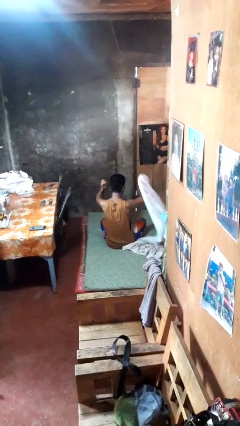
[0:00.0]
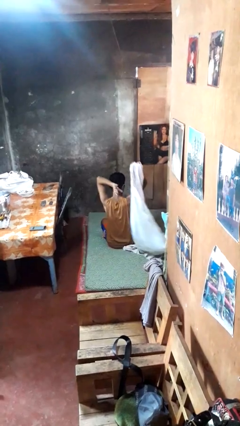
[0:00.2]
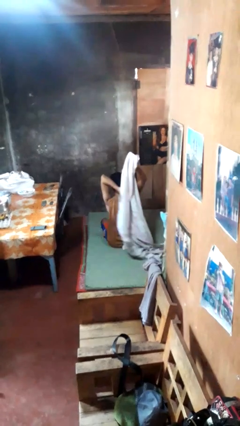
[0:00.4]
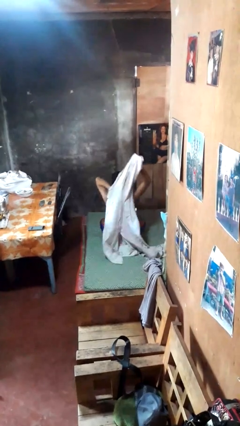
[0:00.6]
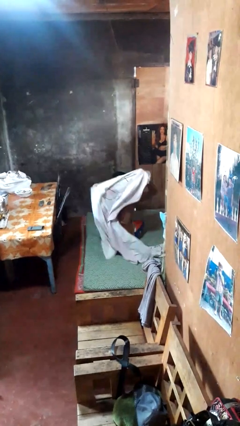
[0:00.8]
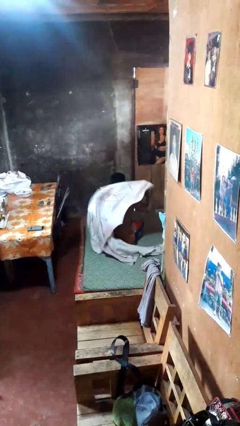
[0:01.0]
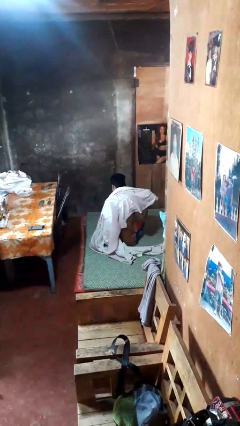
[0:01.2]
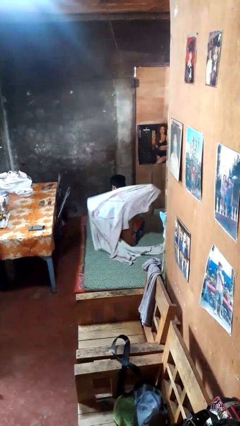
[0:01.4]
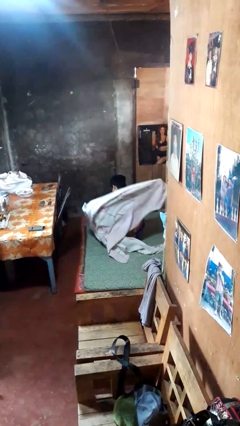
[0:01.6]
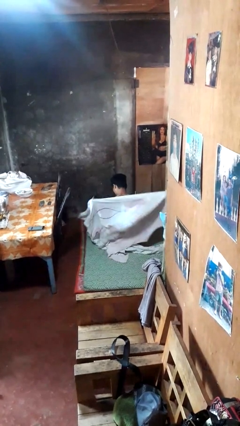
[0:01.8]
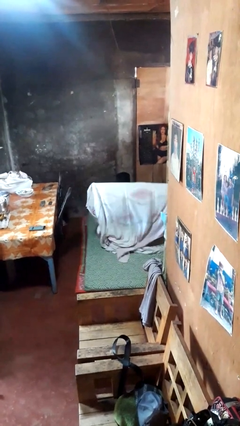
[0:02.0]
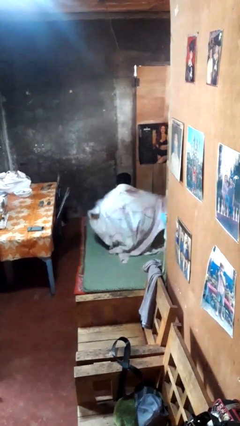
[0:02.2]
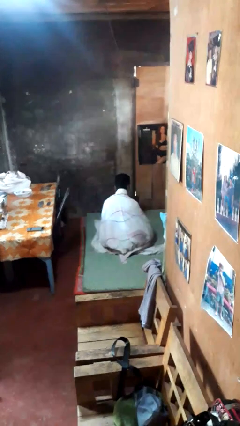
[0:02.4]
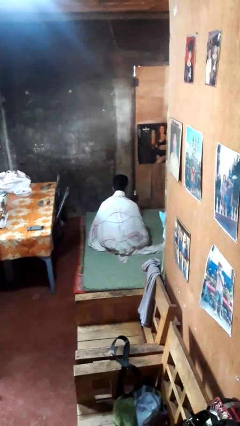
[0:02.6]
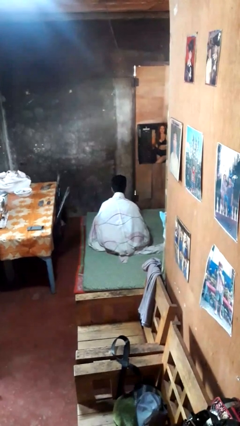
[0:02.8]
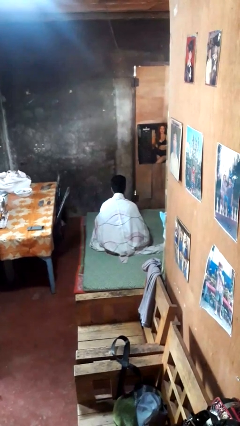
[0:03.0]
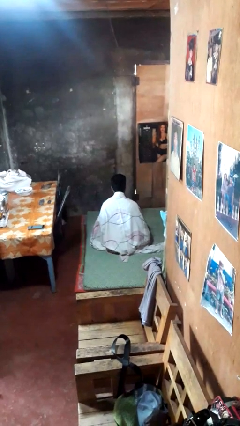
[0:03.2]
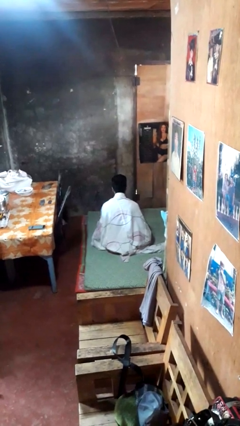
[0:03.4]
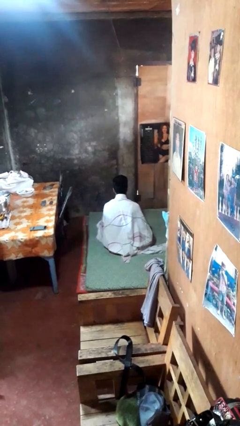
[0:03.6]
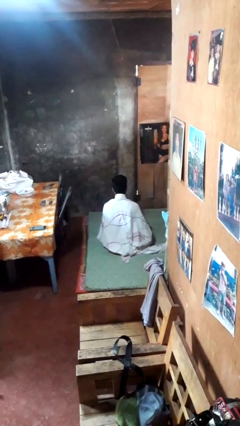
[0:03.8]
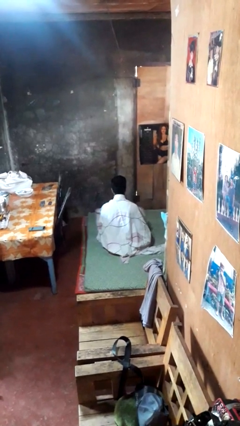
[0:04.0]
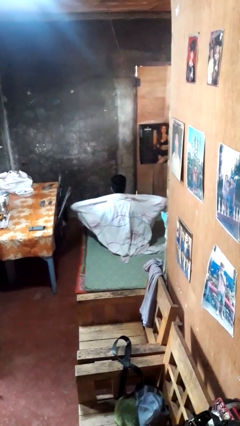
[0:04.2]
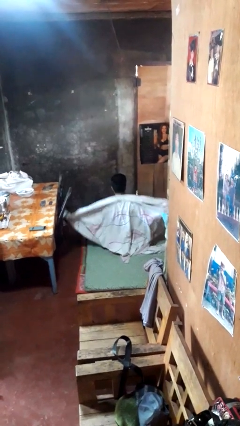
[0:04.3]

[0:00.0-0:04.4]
person covers with blanket

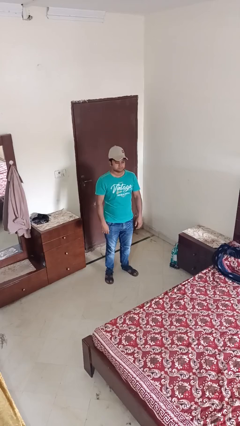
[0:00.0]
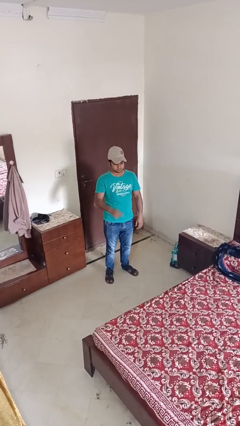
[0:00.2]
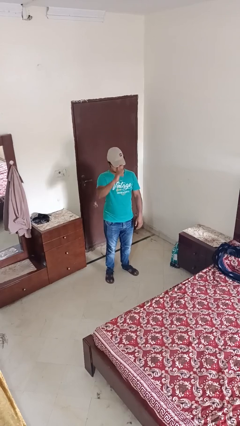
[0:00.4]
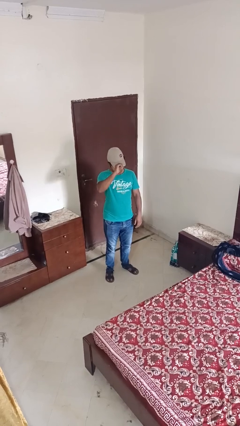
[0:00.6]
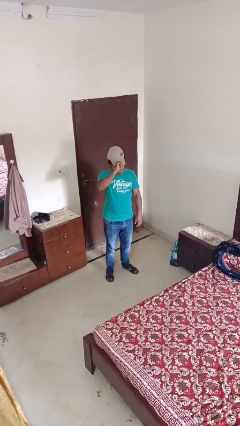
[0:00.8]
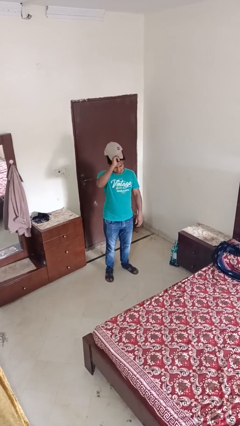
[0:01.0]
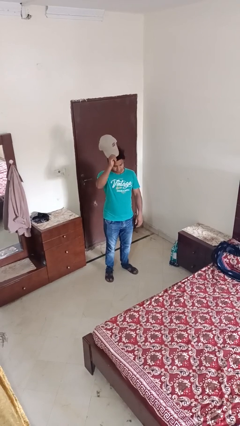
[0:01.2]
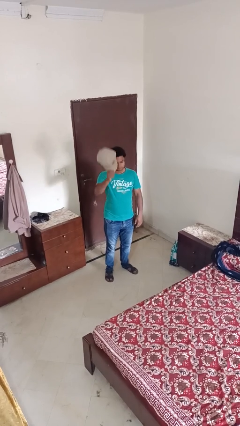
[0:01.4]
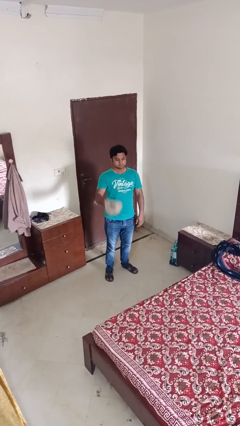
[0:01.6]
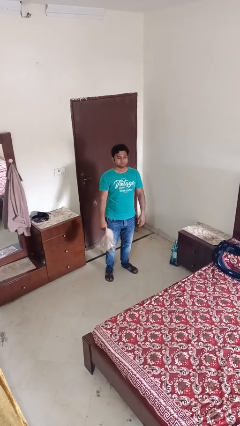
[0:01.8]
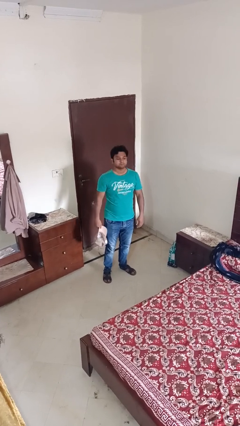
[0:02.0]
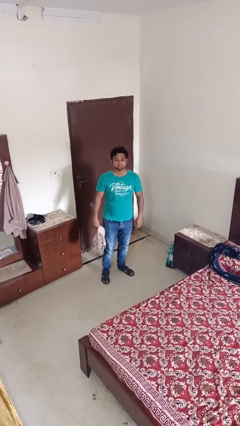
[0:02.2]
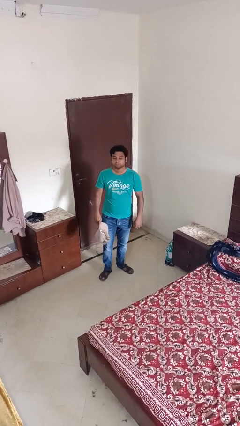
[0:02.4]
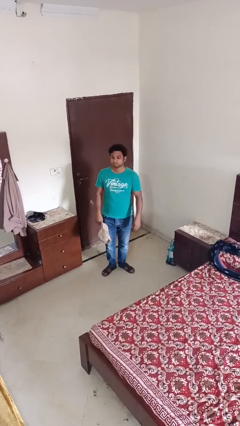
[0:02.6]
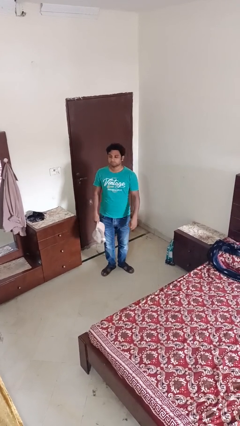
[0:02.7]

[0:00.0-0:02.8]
person takes off hat

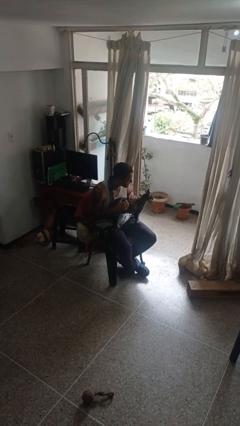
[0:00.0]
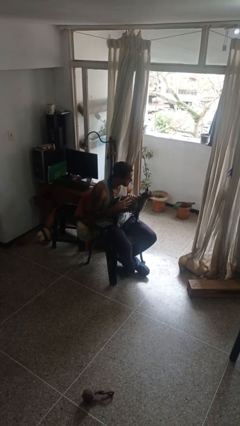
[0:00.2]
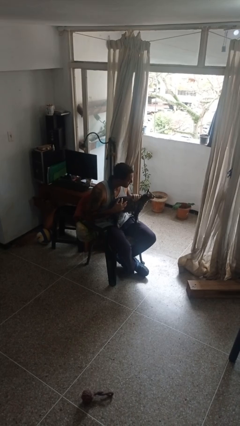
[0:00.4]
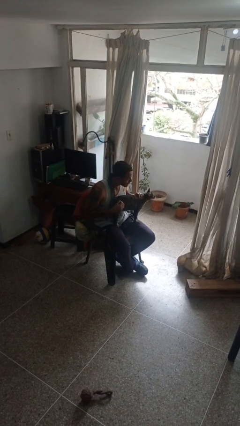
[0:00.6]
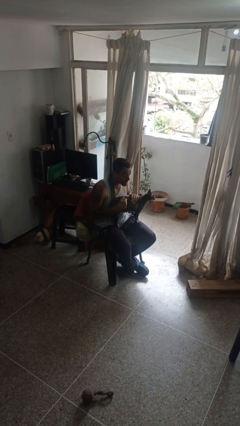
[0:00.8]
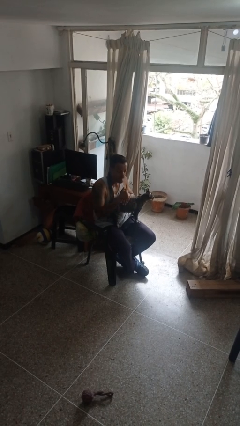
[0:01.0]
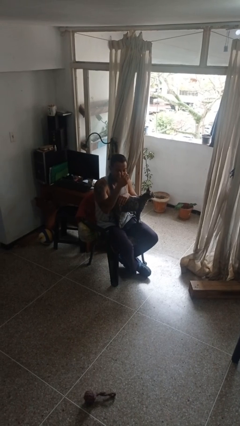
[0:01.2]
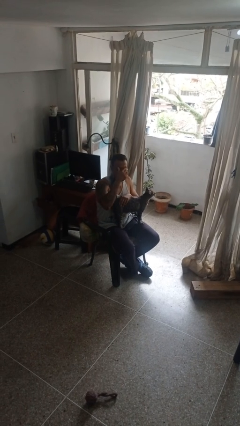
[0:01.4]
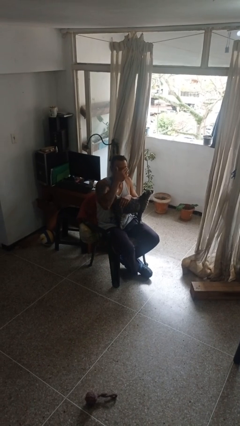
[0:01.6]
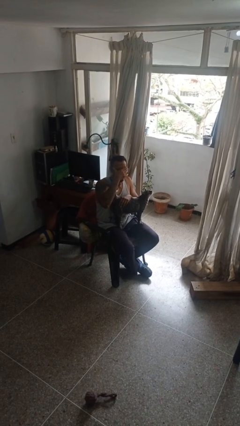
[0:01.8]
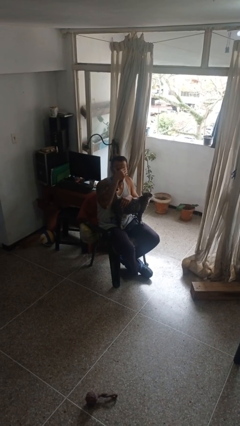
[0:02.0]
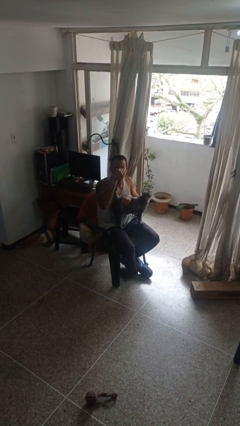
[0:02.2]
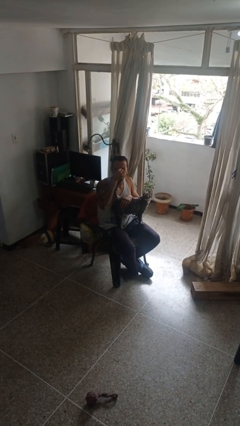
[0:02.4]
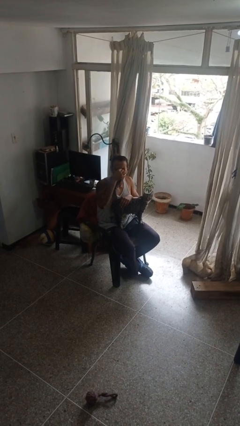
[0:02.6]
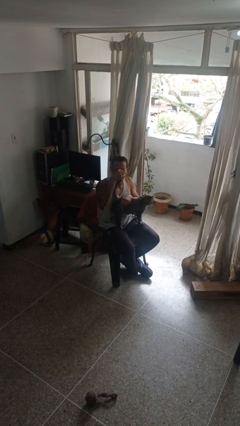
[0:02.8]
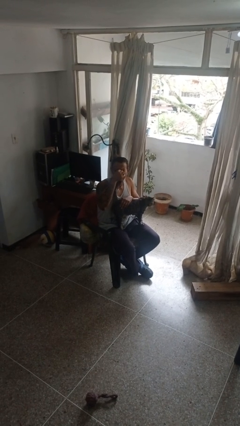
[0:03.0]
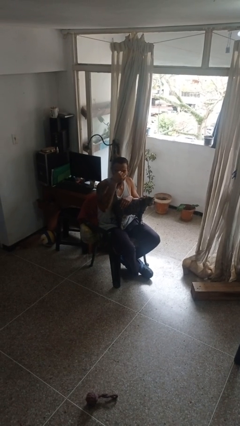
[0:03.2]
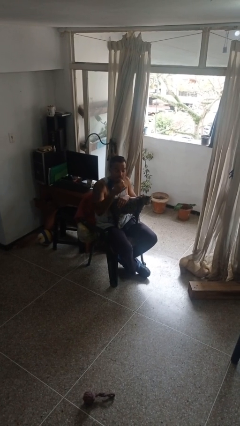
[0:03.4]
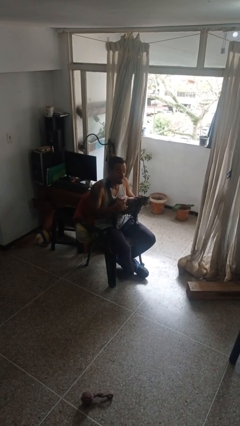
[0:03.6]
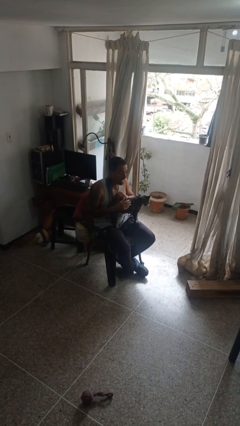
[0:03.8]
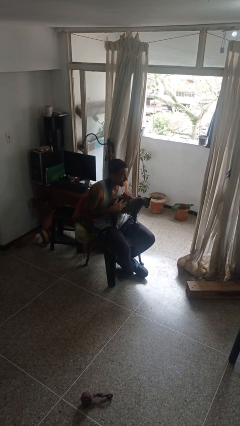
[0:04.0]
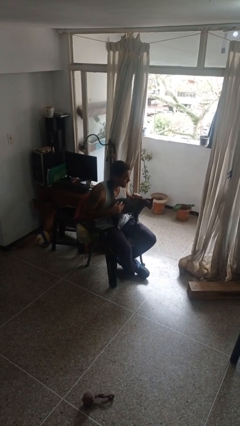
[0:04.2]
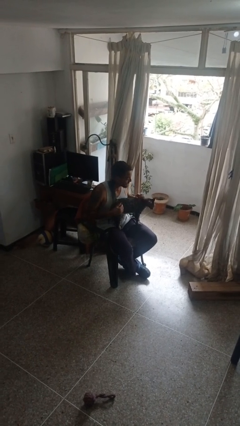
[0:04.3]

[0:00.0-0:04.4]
person rubs eyes

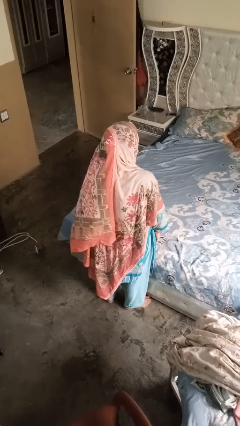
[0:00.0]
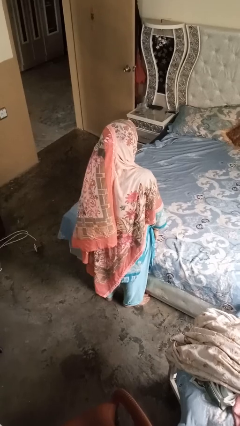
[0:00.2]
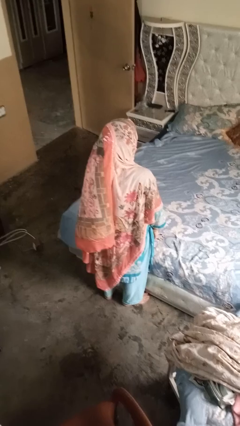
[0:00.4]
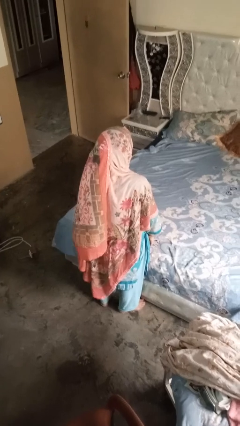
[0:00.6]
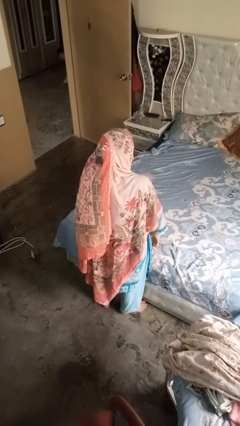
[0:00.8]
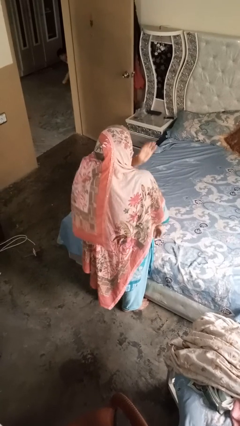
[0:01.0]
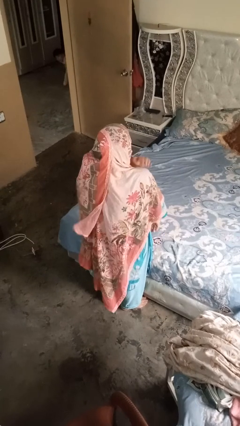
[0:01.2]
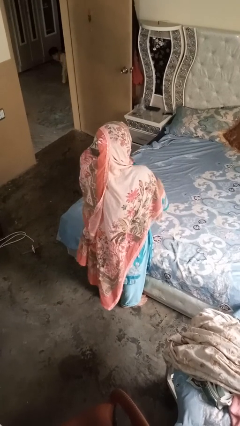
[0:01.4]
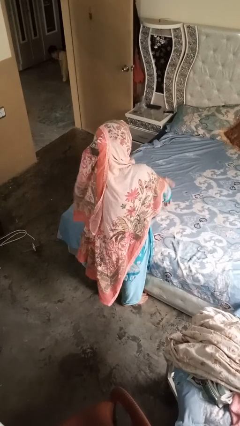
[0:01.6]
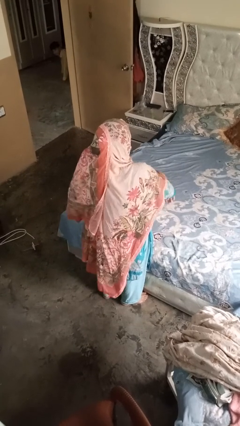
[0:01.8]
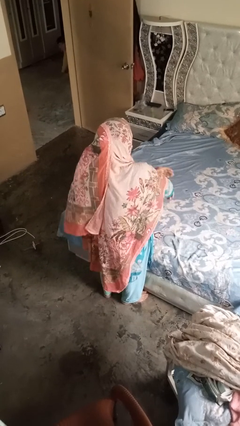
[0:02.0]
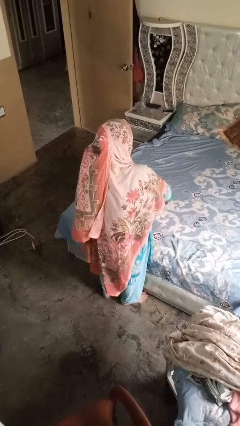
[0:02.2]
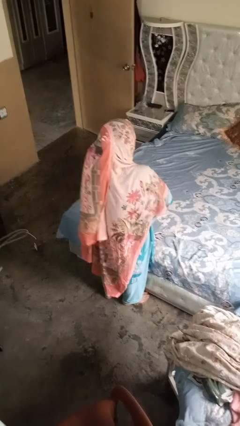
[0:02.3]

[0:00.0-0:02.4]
person swats bug

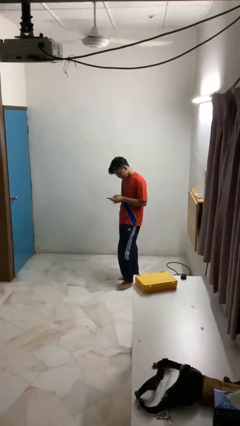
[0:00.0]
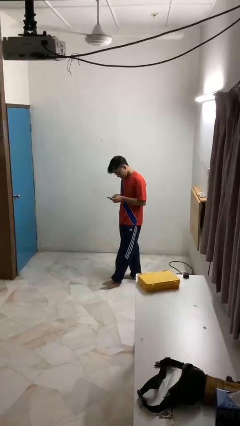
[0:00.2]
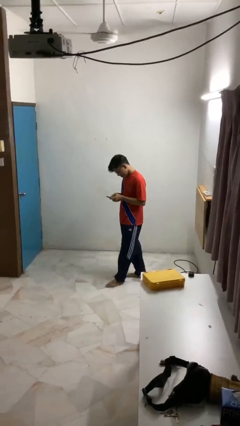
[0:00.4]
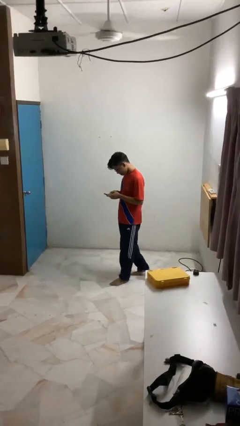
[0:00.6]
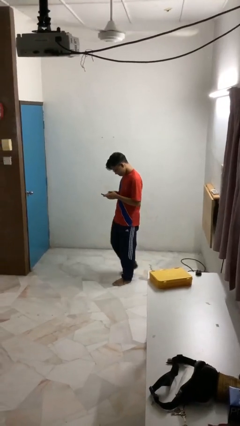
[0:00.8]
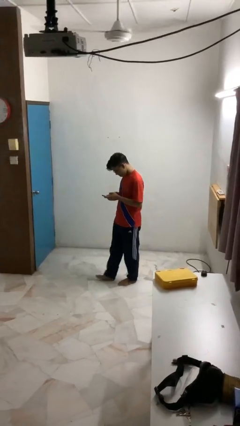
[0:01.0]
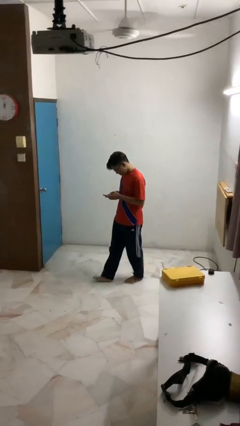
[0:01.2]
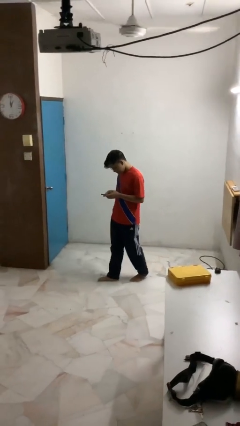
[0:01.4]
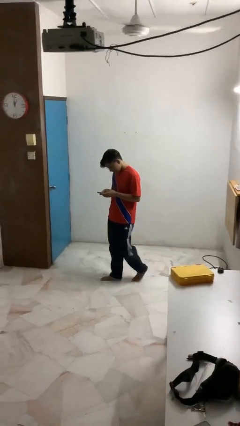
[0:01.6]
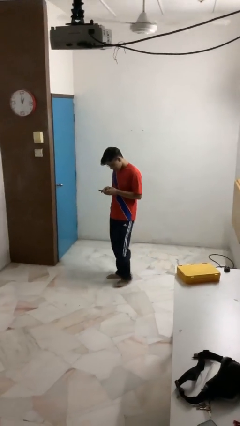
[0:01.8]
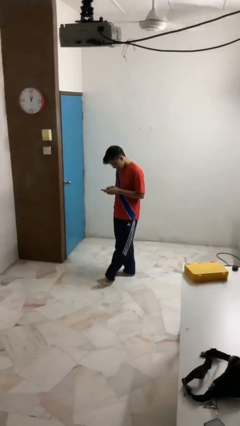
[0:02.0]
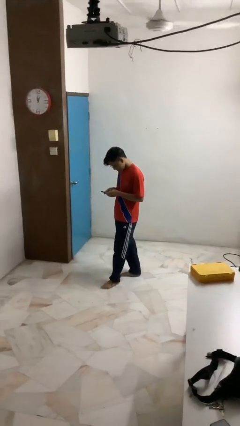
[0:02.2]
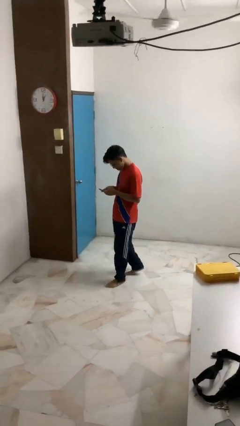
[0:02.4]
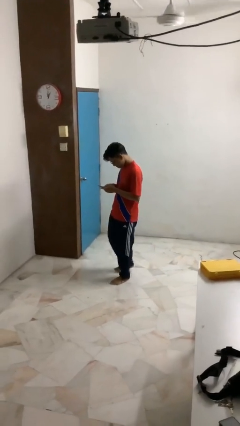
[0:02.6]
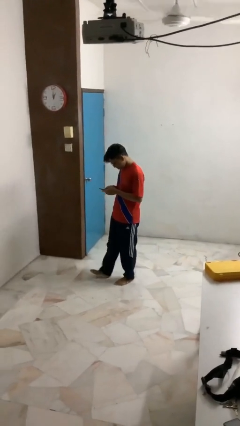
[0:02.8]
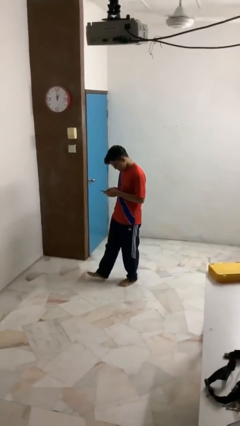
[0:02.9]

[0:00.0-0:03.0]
person texts on phone

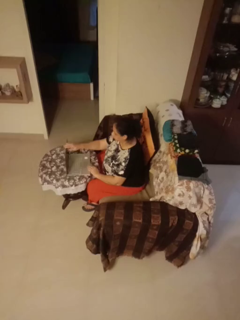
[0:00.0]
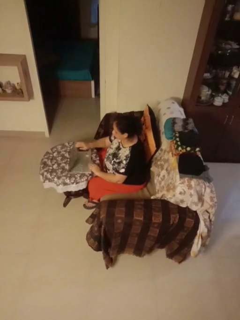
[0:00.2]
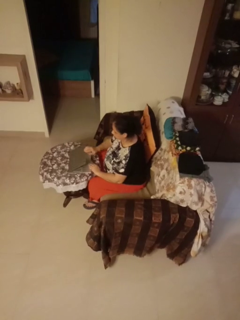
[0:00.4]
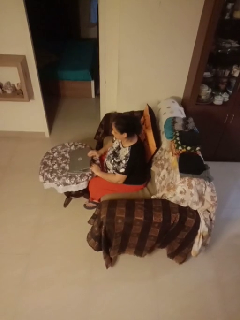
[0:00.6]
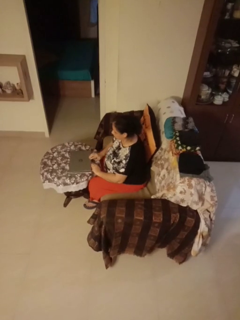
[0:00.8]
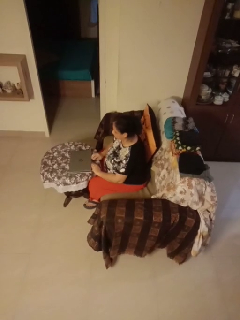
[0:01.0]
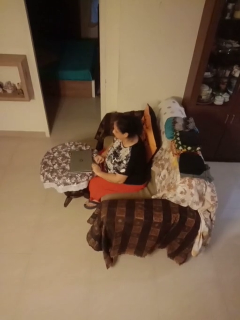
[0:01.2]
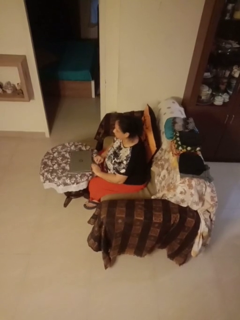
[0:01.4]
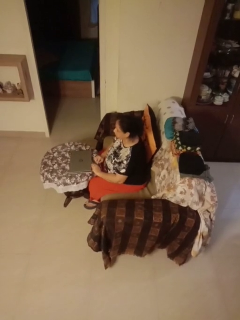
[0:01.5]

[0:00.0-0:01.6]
person closes laptop
